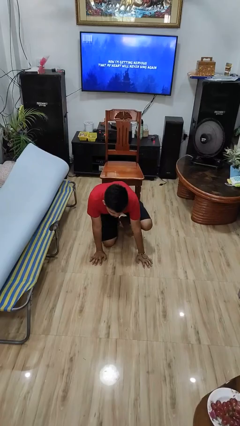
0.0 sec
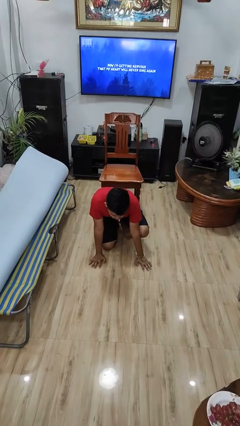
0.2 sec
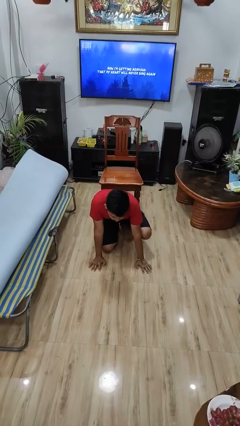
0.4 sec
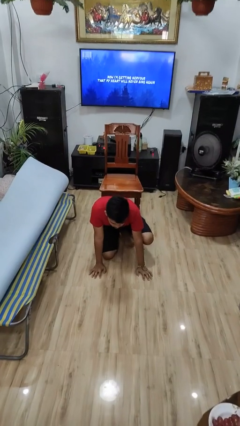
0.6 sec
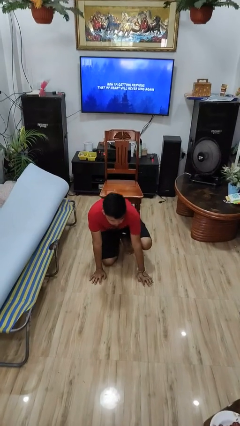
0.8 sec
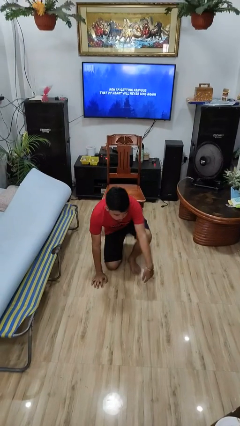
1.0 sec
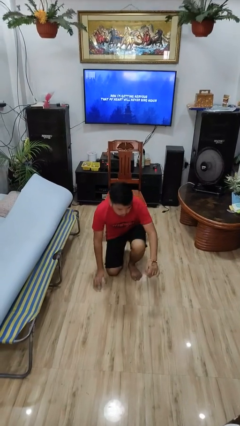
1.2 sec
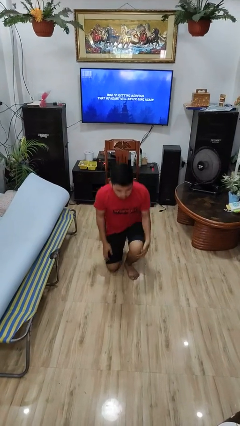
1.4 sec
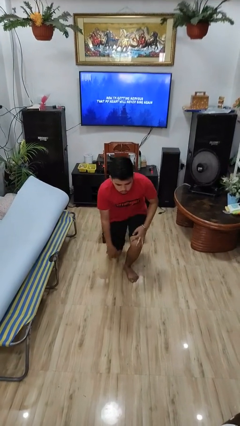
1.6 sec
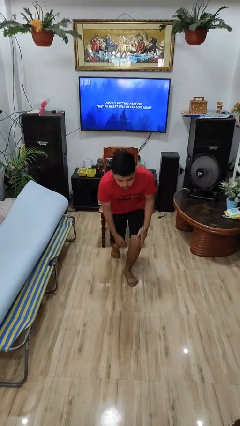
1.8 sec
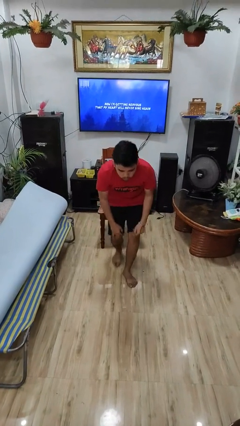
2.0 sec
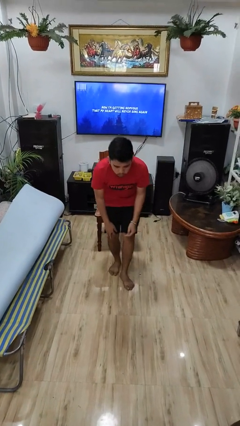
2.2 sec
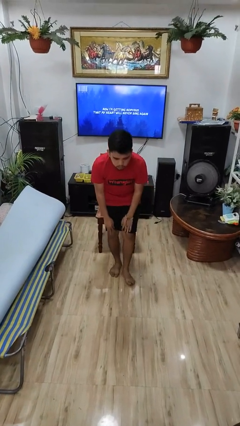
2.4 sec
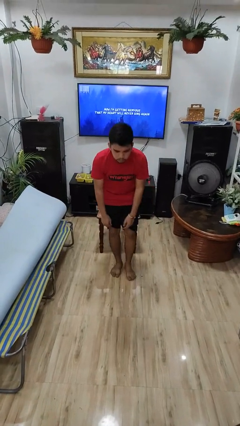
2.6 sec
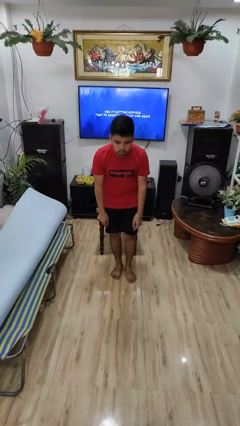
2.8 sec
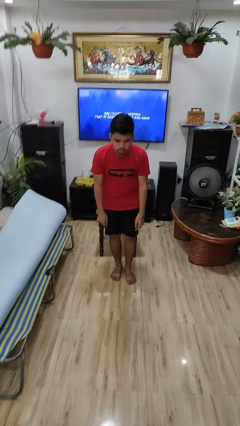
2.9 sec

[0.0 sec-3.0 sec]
person stands up from floor

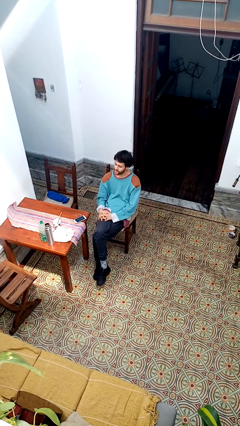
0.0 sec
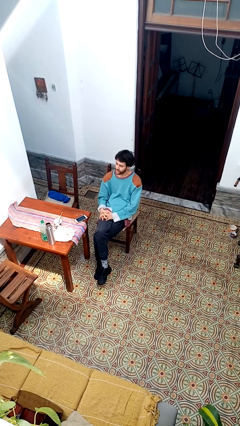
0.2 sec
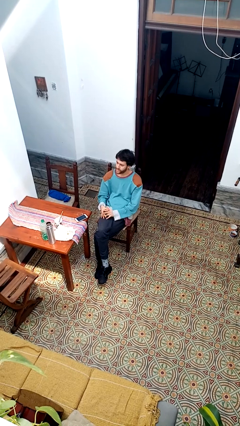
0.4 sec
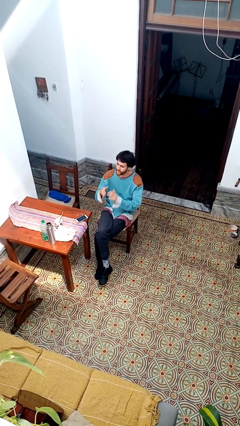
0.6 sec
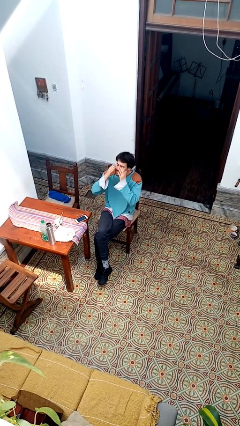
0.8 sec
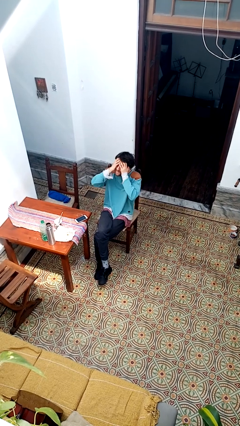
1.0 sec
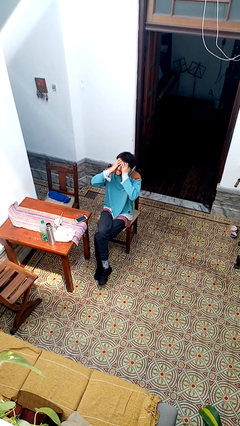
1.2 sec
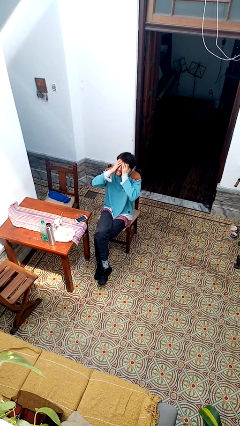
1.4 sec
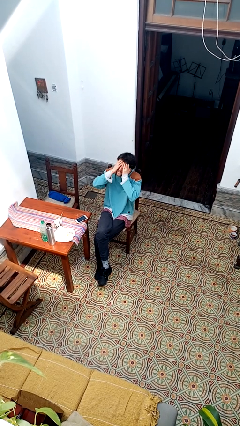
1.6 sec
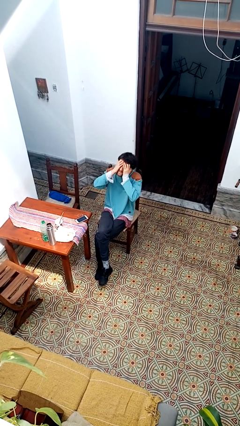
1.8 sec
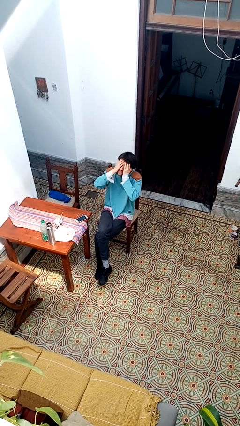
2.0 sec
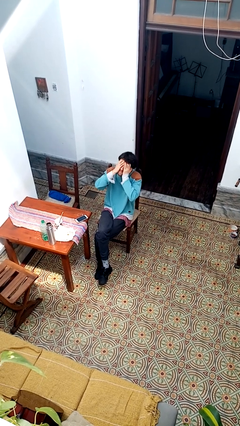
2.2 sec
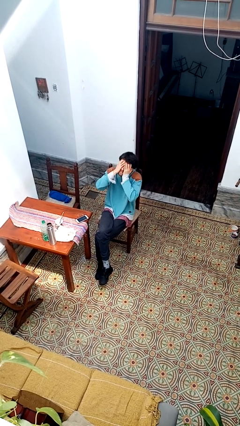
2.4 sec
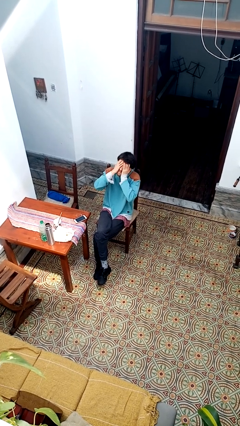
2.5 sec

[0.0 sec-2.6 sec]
person covers face with hands

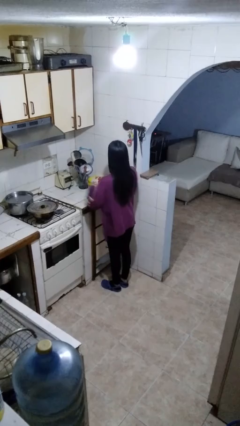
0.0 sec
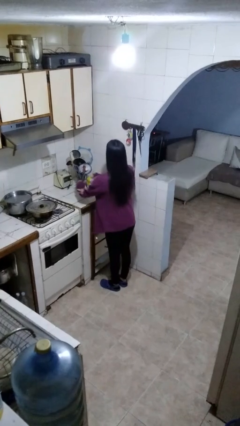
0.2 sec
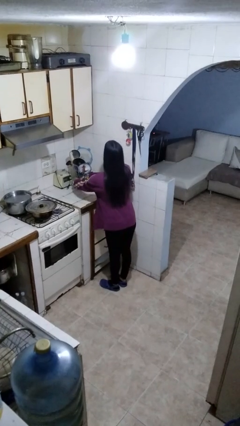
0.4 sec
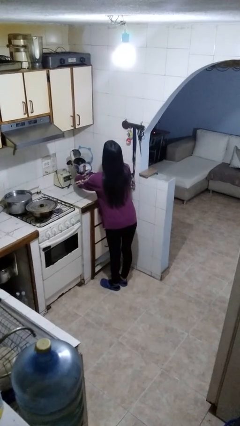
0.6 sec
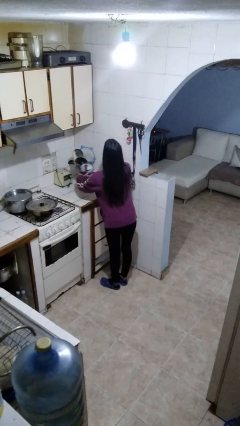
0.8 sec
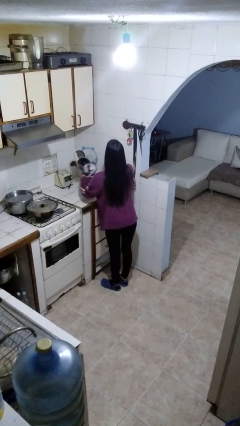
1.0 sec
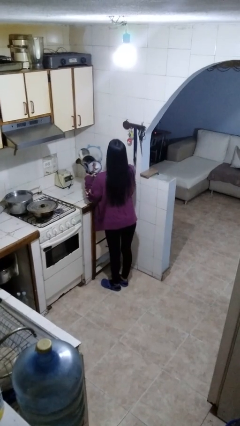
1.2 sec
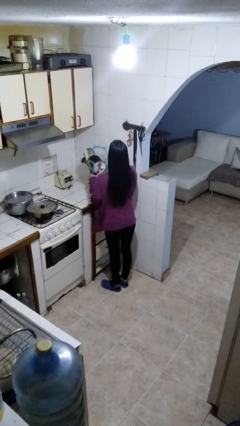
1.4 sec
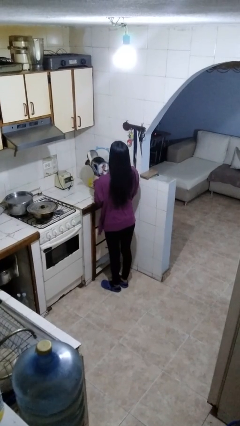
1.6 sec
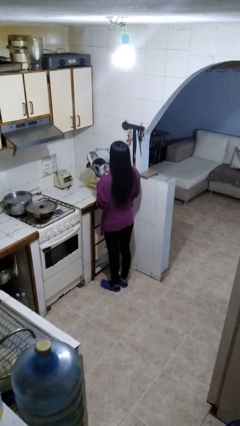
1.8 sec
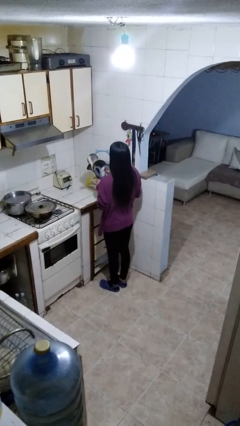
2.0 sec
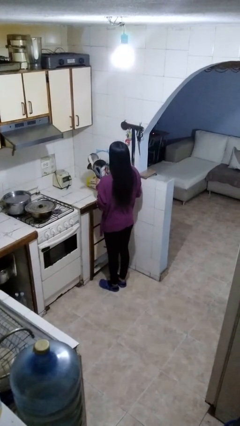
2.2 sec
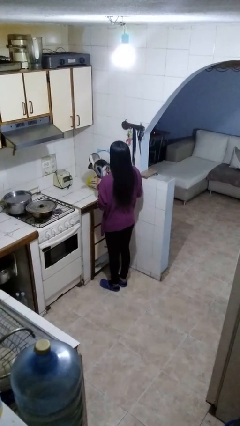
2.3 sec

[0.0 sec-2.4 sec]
person puts down object on countertop

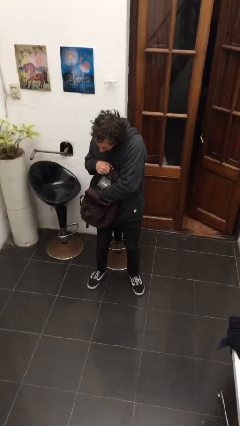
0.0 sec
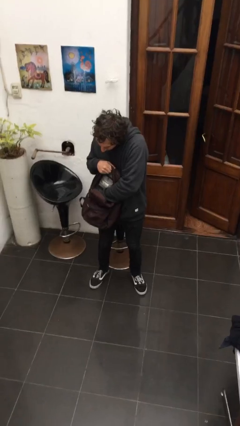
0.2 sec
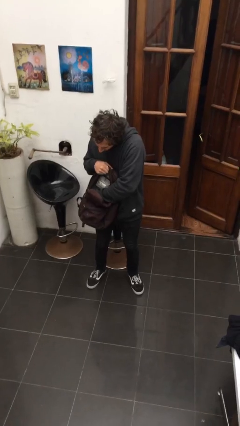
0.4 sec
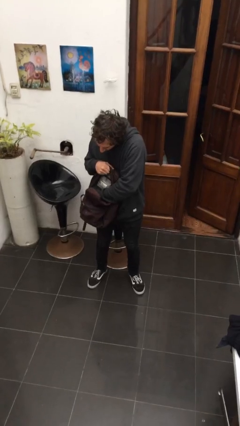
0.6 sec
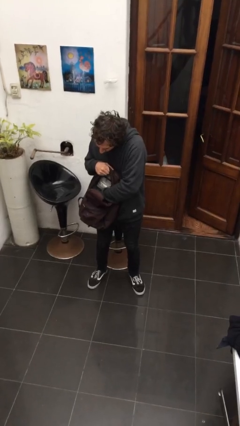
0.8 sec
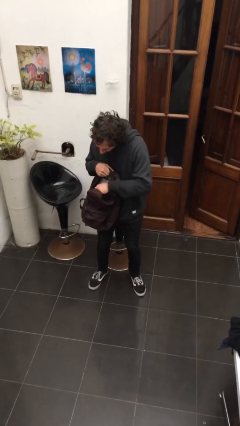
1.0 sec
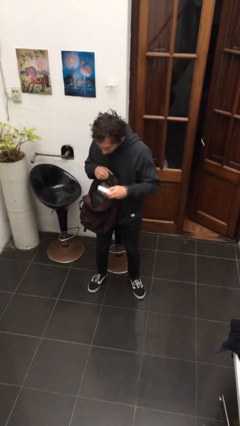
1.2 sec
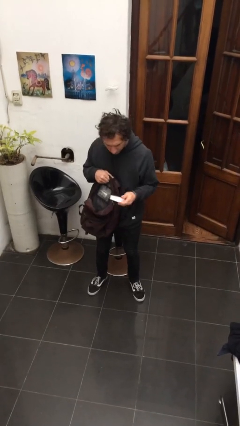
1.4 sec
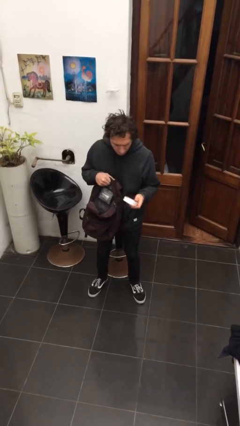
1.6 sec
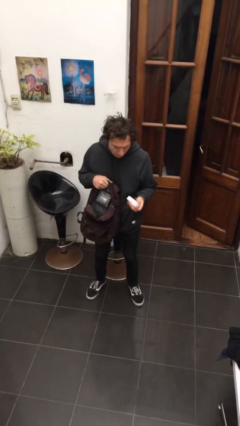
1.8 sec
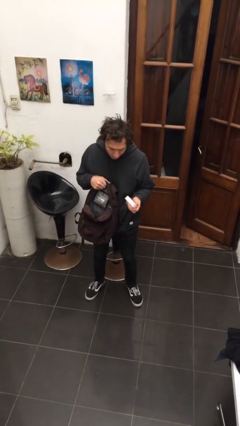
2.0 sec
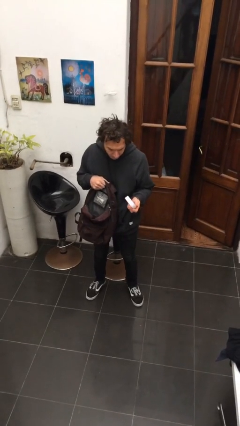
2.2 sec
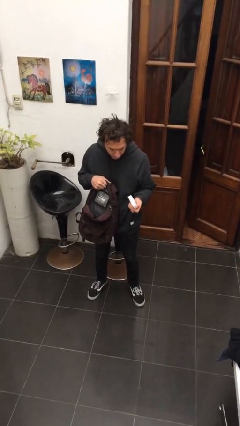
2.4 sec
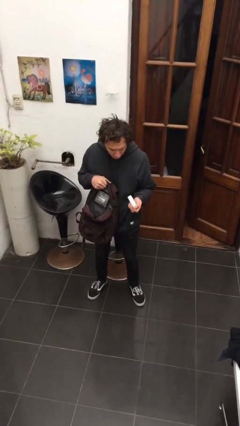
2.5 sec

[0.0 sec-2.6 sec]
person takes object from backpack

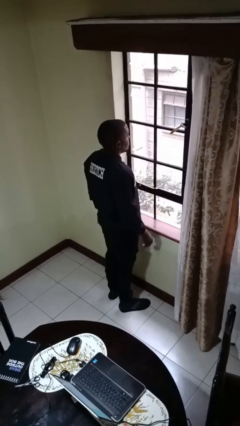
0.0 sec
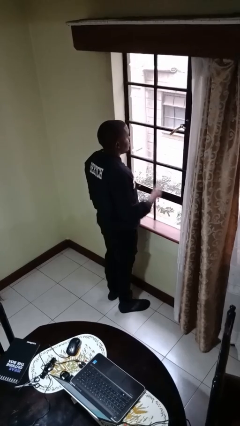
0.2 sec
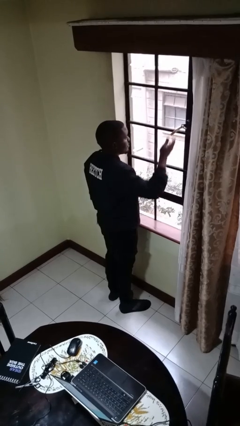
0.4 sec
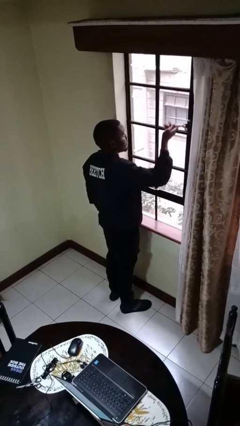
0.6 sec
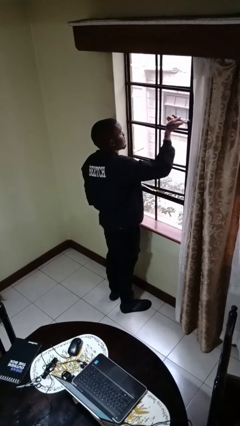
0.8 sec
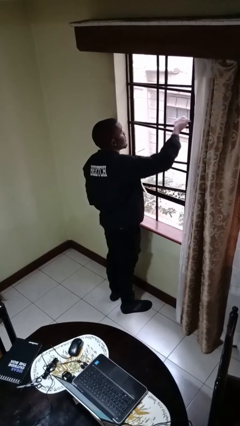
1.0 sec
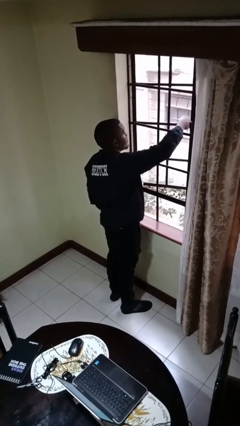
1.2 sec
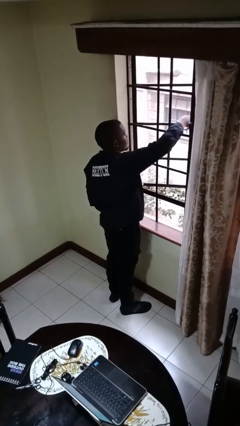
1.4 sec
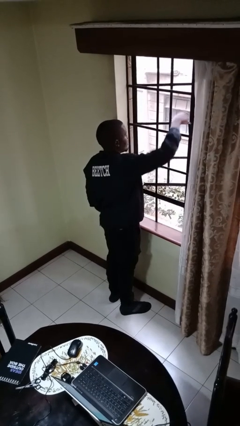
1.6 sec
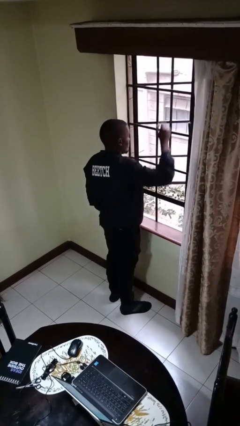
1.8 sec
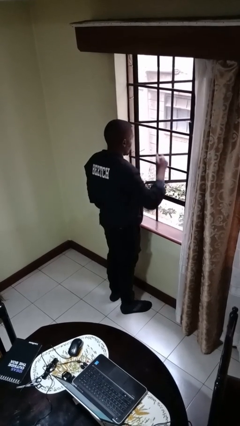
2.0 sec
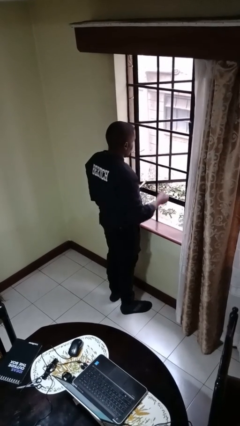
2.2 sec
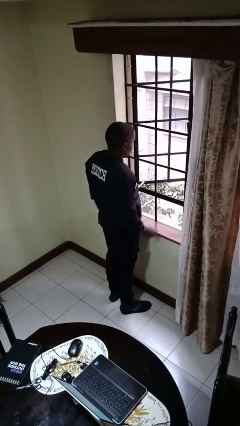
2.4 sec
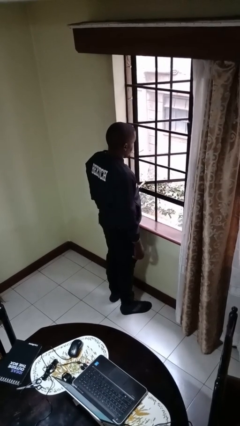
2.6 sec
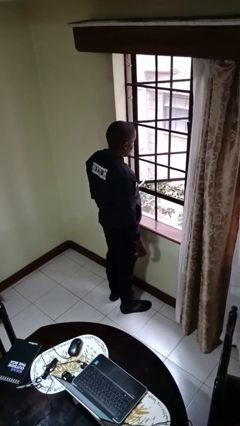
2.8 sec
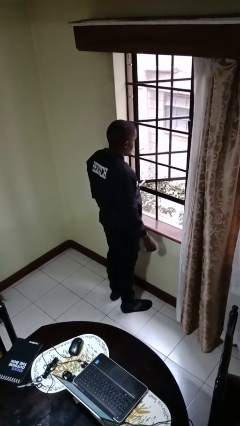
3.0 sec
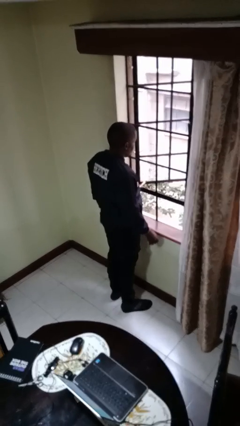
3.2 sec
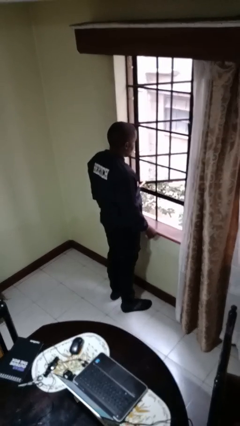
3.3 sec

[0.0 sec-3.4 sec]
person opens home window

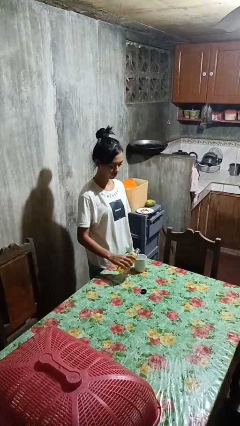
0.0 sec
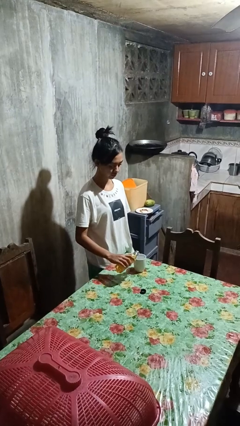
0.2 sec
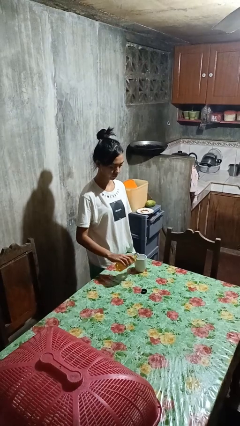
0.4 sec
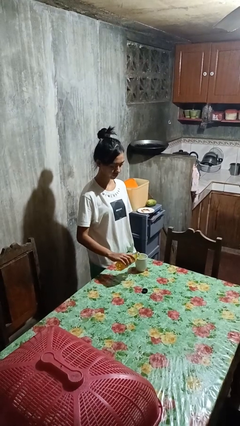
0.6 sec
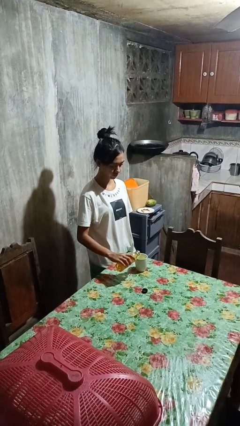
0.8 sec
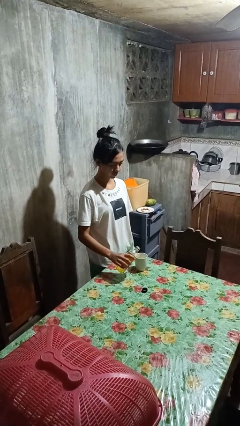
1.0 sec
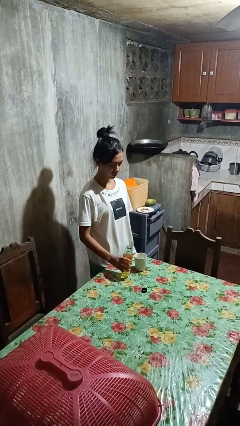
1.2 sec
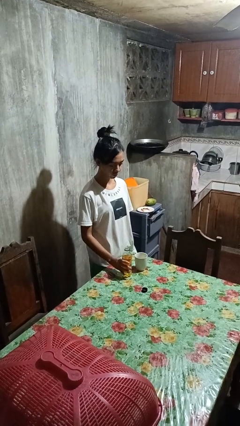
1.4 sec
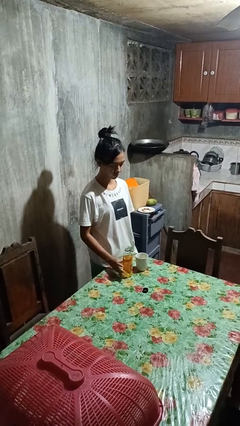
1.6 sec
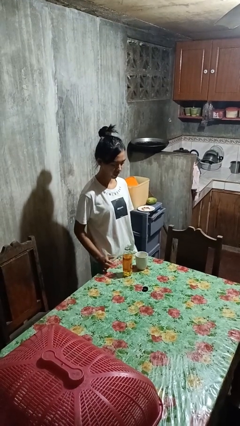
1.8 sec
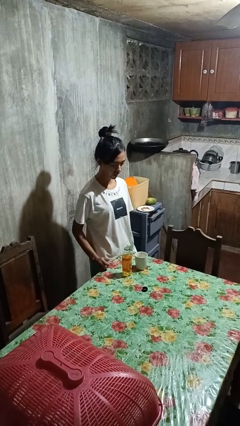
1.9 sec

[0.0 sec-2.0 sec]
person pours liquid into cup

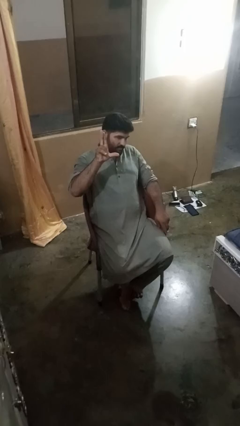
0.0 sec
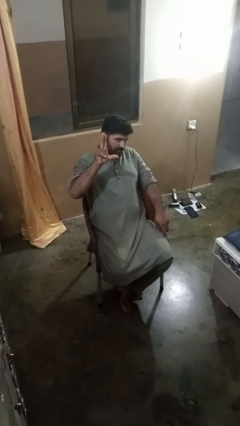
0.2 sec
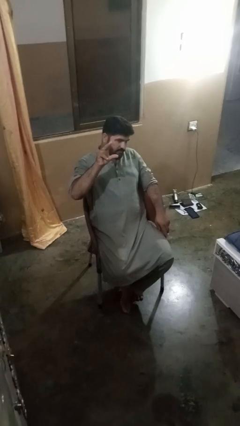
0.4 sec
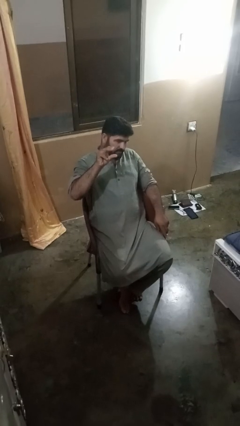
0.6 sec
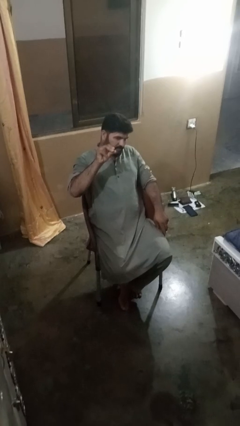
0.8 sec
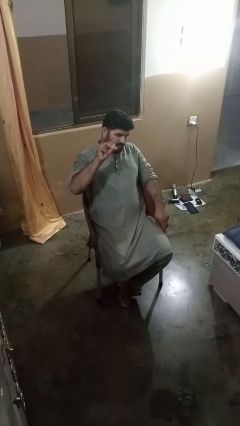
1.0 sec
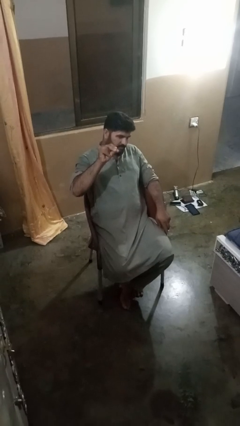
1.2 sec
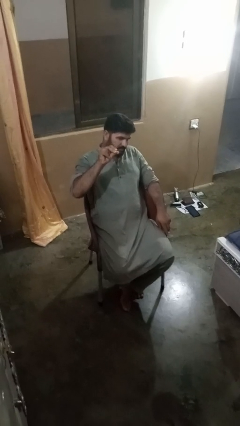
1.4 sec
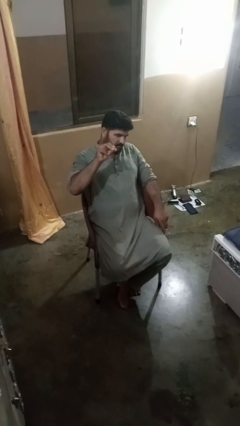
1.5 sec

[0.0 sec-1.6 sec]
person gestures zoom in
